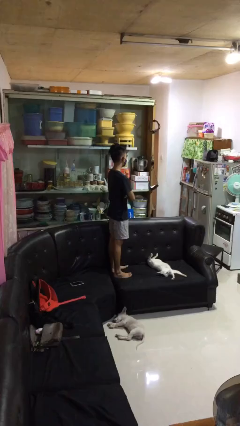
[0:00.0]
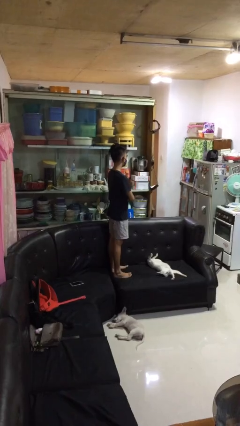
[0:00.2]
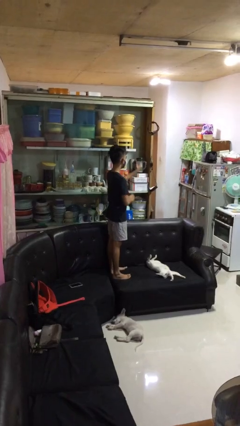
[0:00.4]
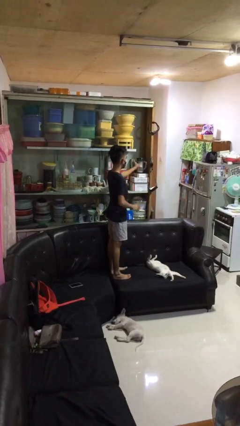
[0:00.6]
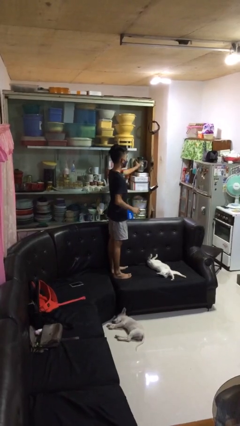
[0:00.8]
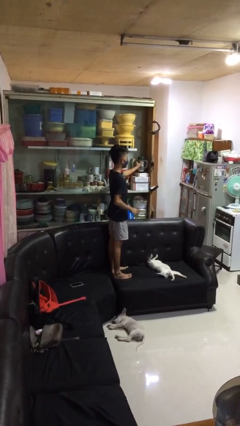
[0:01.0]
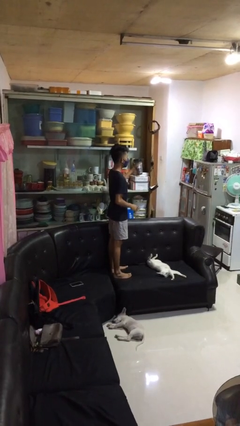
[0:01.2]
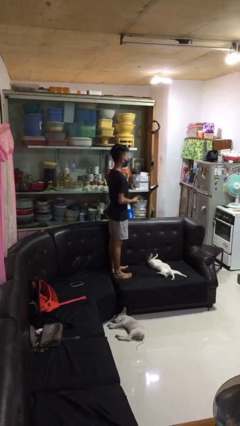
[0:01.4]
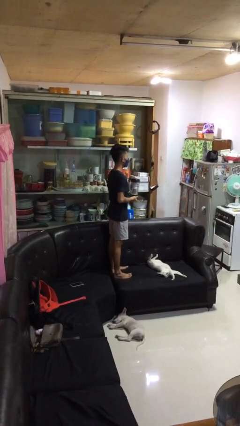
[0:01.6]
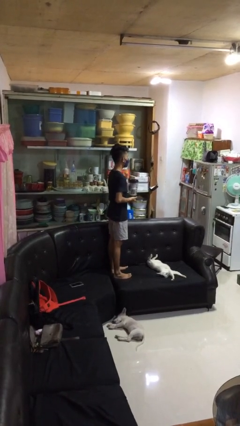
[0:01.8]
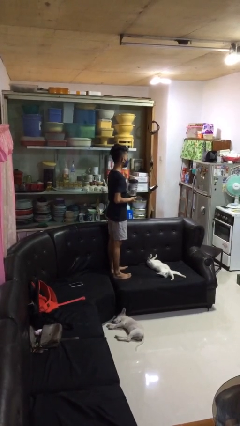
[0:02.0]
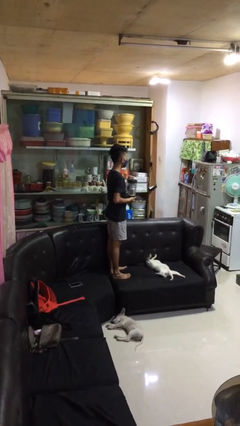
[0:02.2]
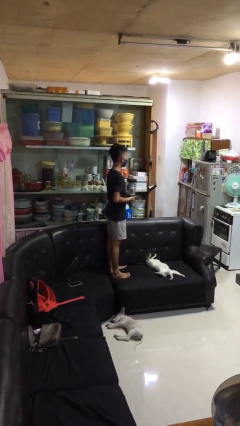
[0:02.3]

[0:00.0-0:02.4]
person picks up object from cabinet

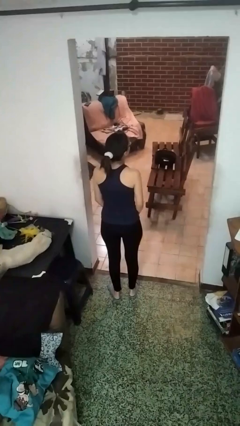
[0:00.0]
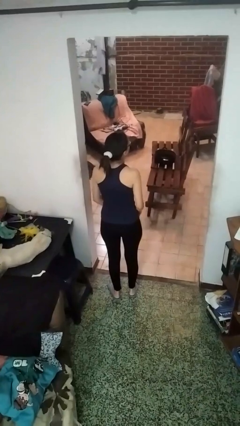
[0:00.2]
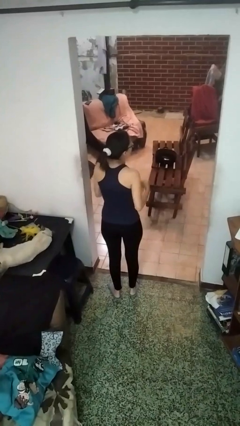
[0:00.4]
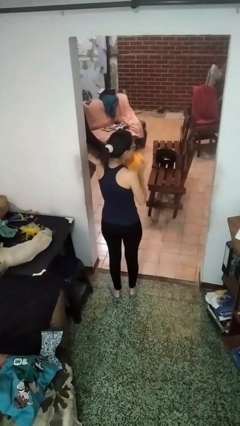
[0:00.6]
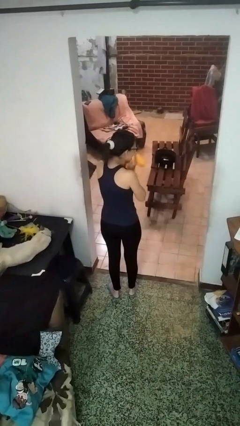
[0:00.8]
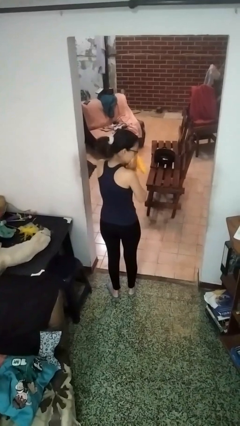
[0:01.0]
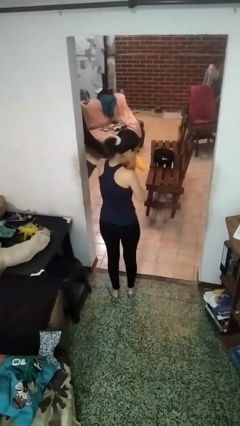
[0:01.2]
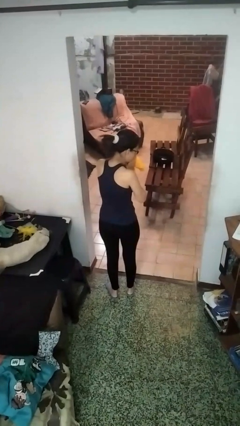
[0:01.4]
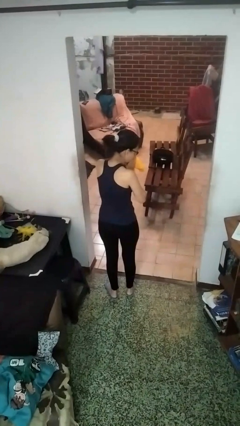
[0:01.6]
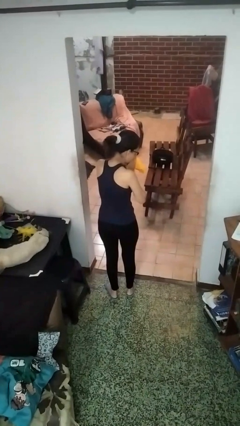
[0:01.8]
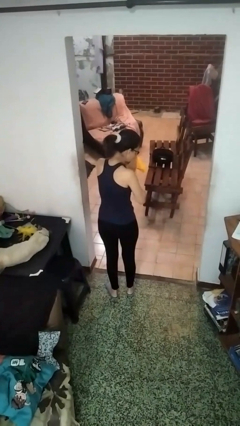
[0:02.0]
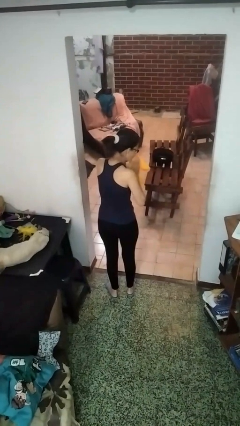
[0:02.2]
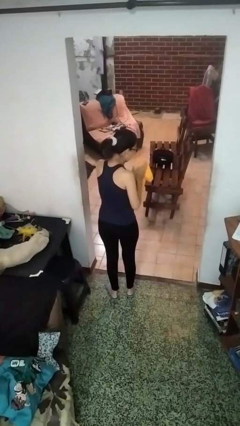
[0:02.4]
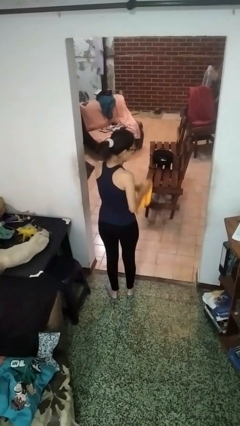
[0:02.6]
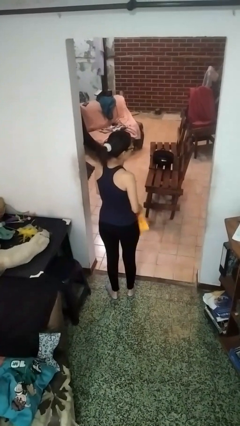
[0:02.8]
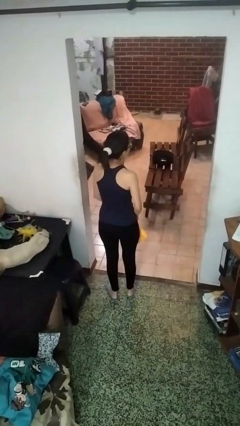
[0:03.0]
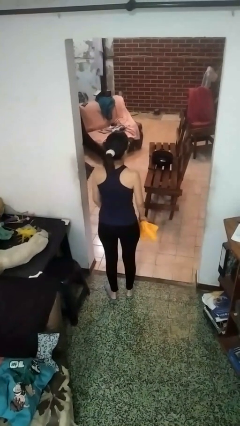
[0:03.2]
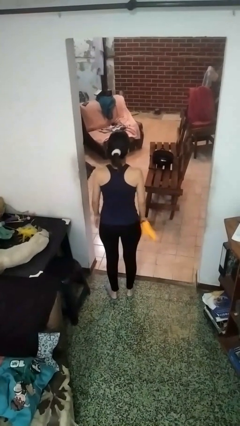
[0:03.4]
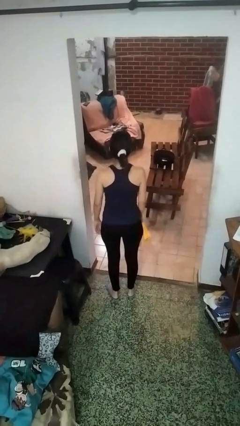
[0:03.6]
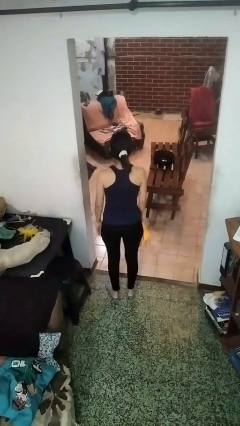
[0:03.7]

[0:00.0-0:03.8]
person blows nose

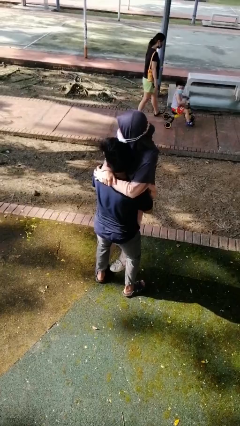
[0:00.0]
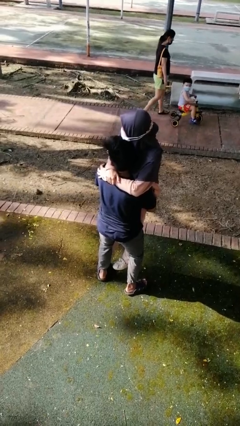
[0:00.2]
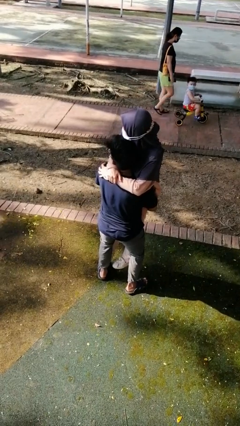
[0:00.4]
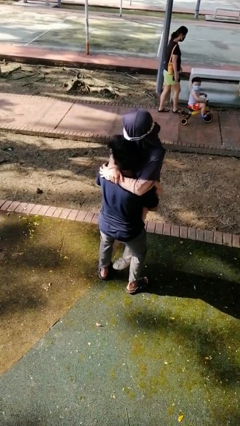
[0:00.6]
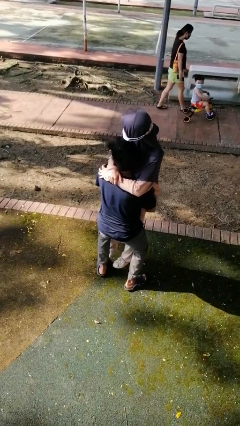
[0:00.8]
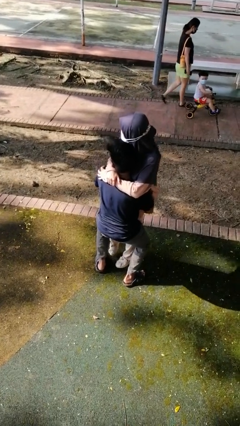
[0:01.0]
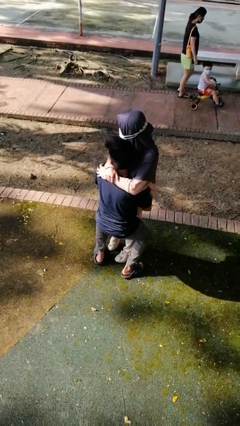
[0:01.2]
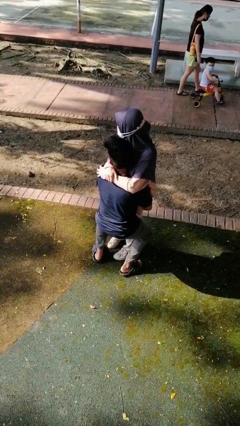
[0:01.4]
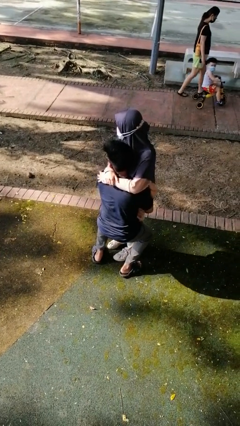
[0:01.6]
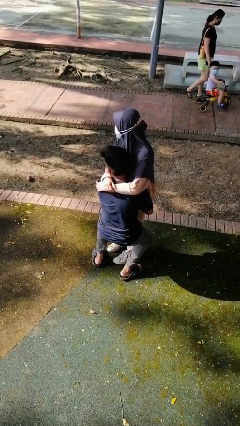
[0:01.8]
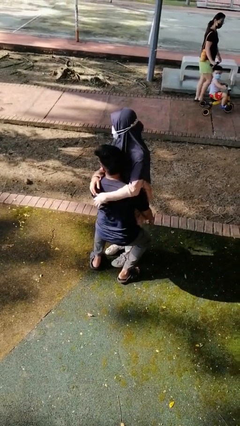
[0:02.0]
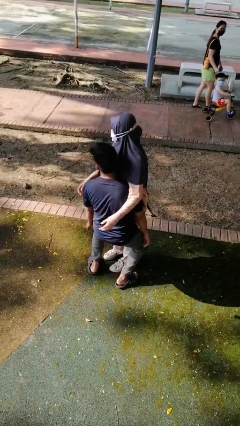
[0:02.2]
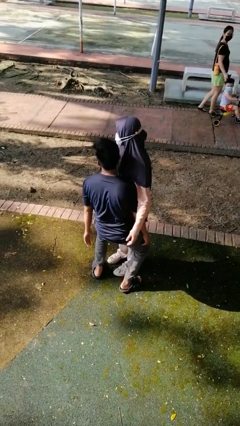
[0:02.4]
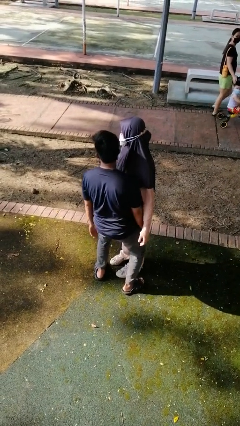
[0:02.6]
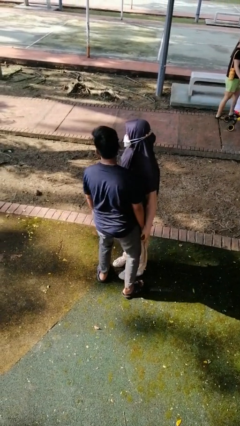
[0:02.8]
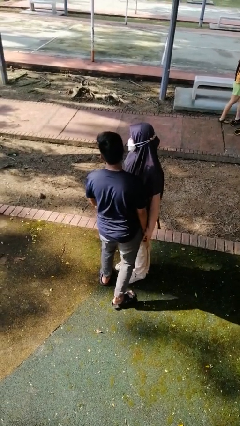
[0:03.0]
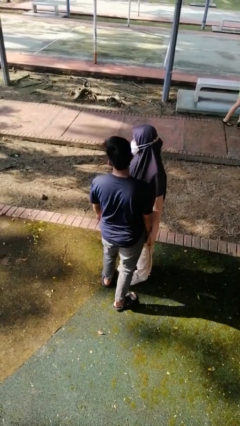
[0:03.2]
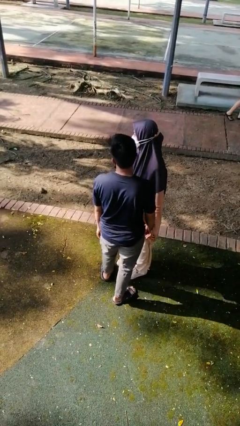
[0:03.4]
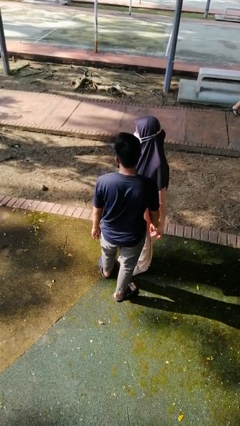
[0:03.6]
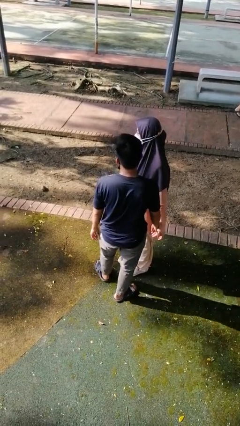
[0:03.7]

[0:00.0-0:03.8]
person puts down person

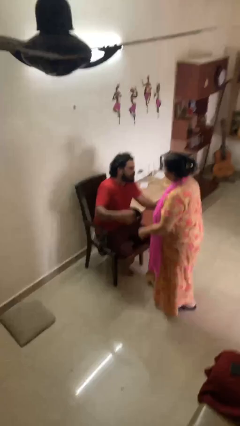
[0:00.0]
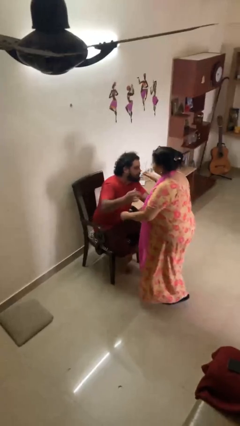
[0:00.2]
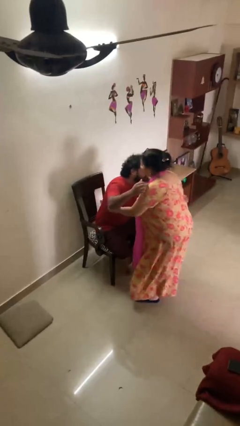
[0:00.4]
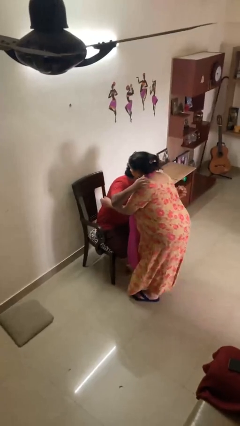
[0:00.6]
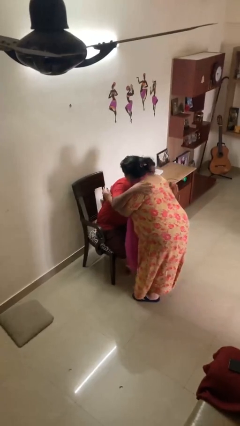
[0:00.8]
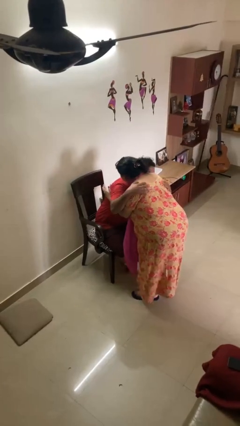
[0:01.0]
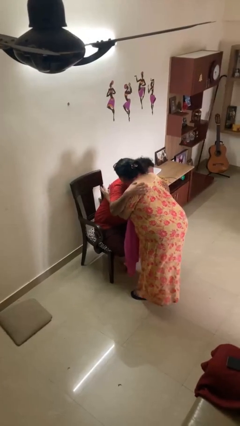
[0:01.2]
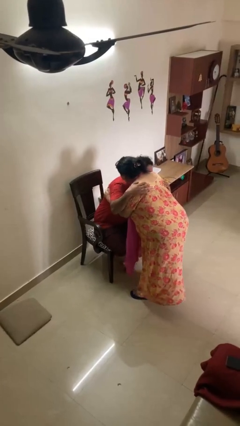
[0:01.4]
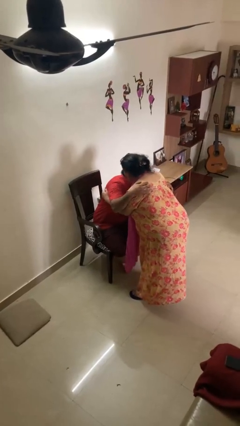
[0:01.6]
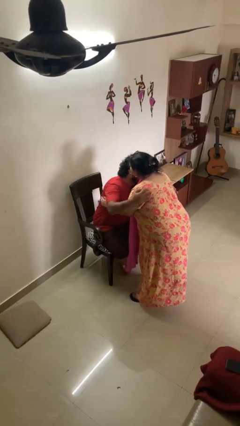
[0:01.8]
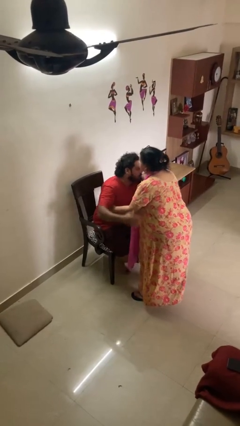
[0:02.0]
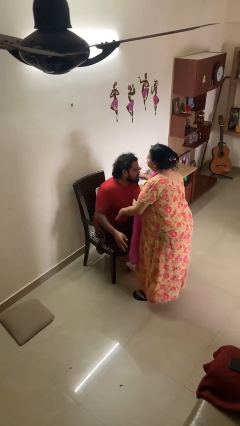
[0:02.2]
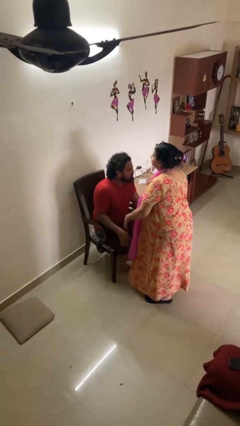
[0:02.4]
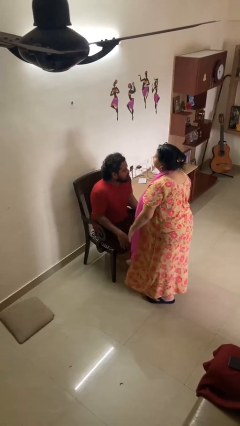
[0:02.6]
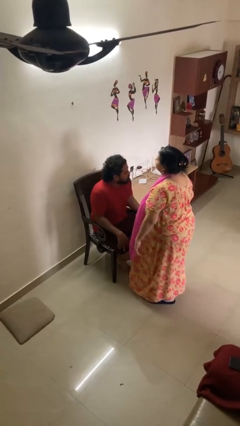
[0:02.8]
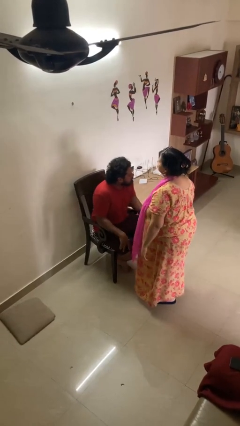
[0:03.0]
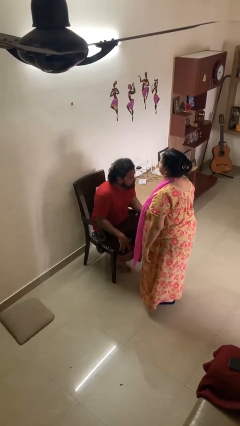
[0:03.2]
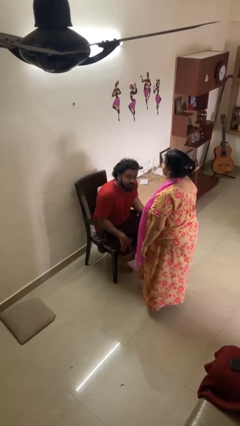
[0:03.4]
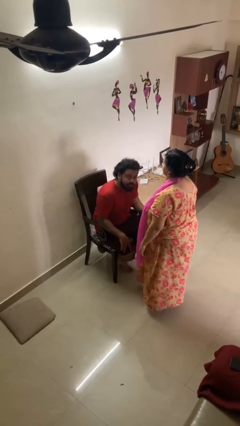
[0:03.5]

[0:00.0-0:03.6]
person embraces person

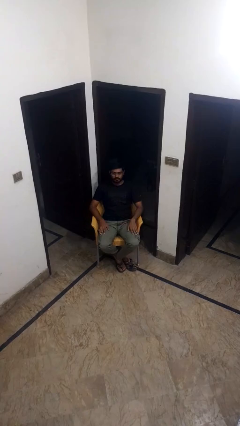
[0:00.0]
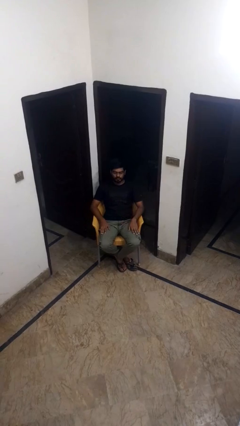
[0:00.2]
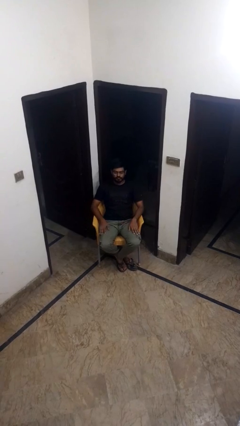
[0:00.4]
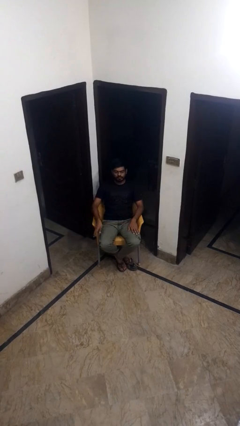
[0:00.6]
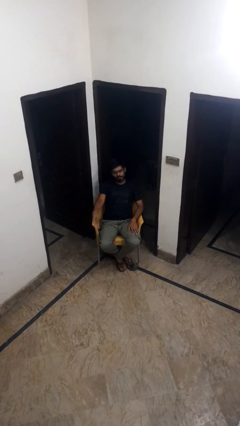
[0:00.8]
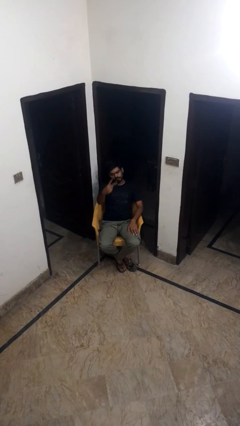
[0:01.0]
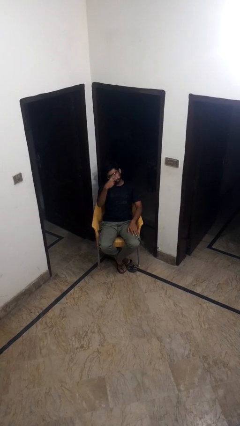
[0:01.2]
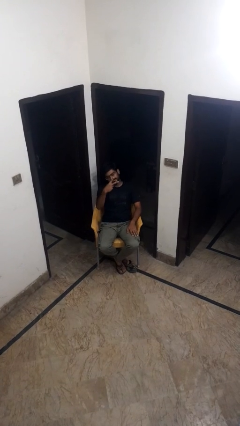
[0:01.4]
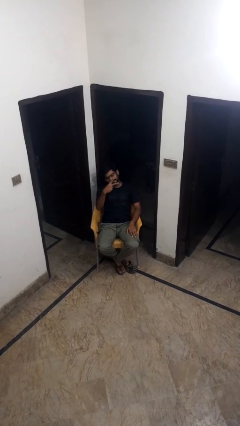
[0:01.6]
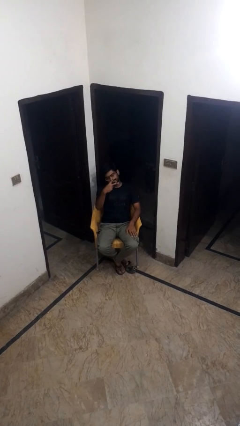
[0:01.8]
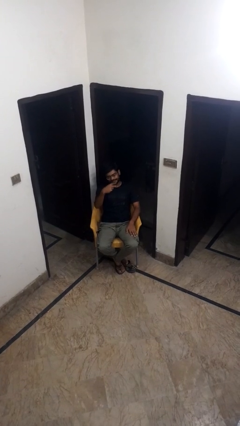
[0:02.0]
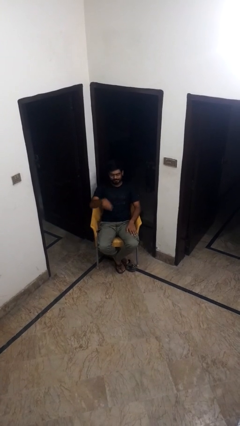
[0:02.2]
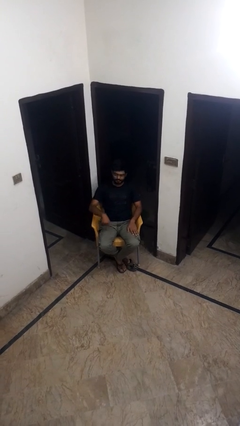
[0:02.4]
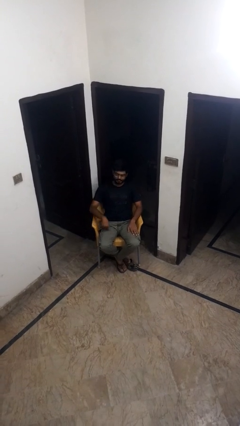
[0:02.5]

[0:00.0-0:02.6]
person gestures peace

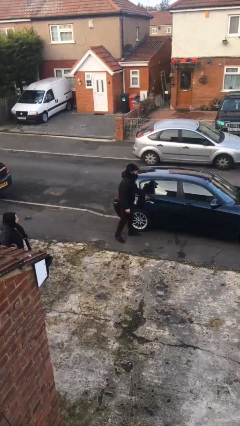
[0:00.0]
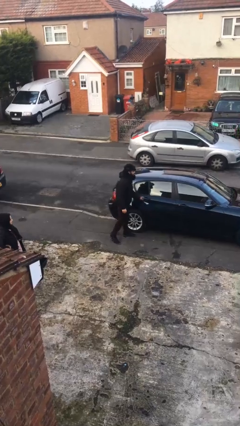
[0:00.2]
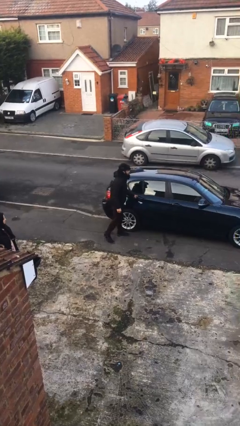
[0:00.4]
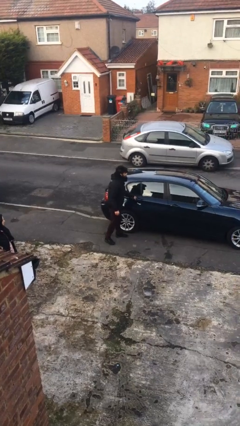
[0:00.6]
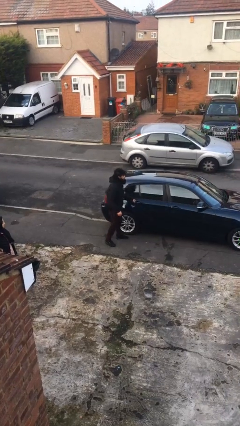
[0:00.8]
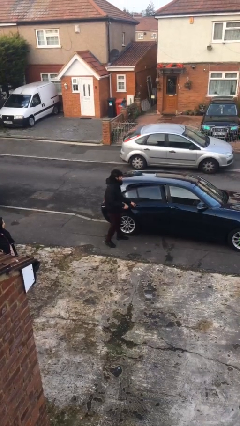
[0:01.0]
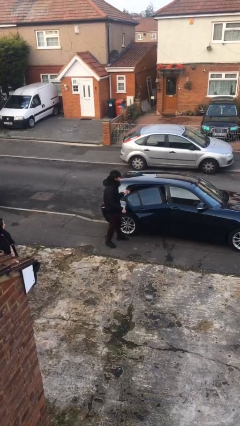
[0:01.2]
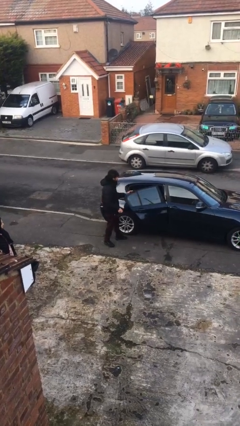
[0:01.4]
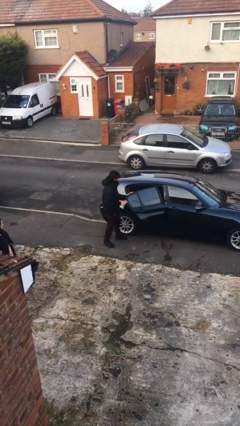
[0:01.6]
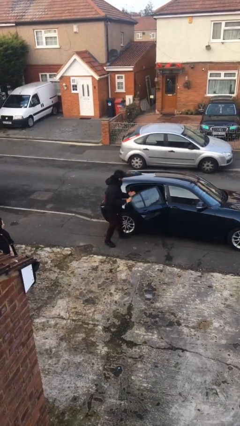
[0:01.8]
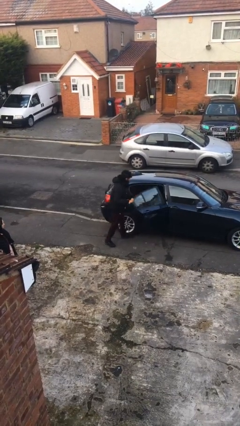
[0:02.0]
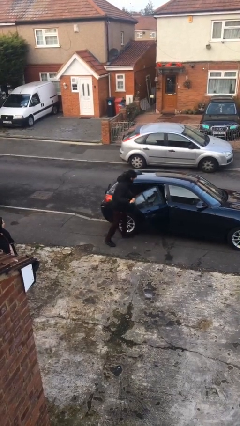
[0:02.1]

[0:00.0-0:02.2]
person opens car door
